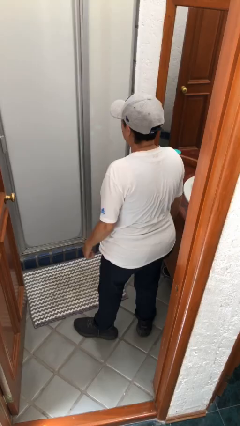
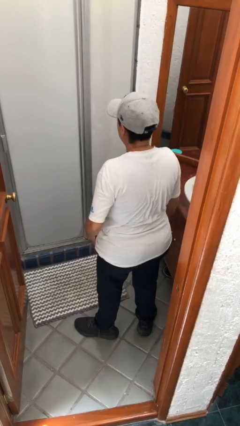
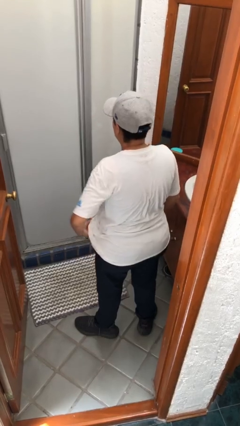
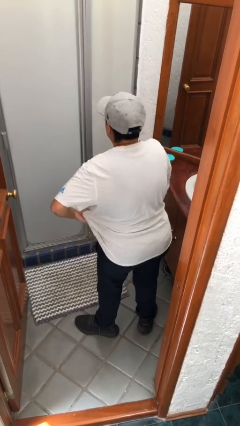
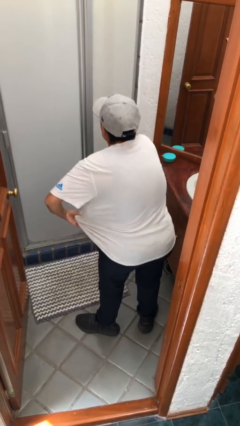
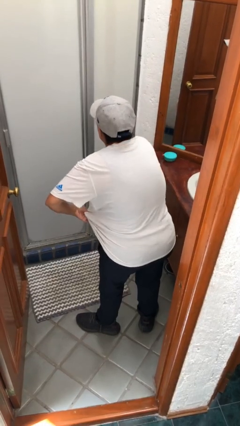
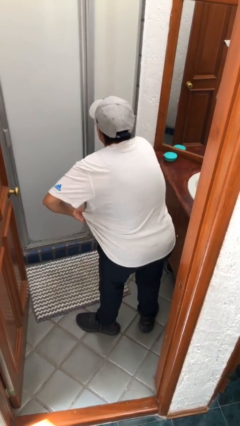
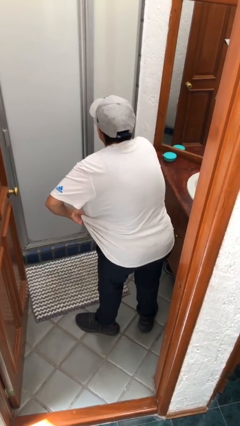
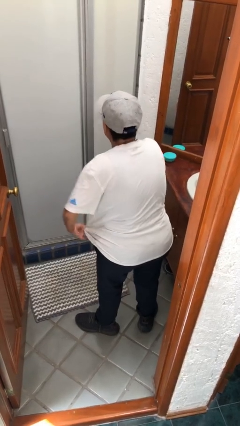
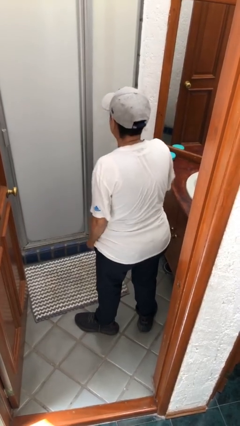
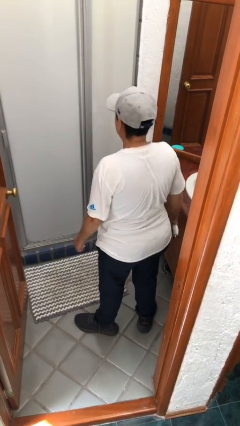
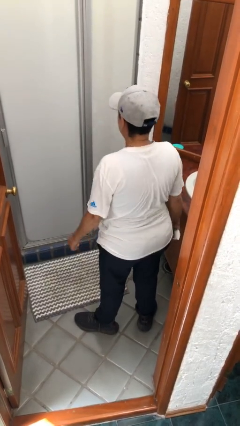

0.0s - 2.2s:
person applies deodorant

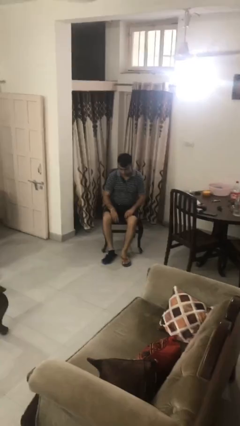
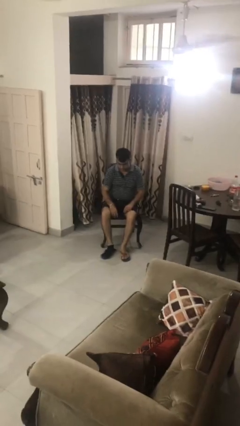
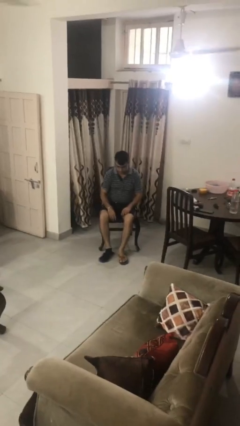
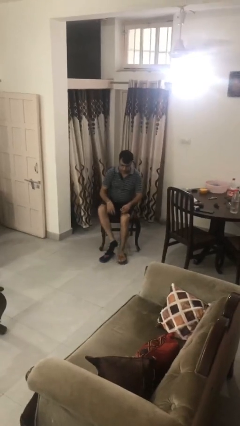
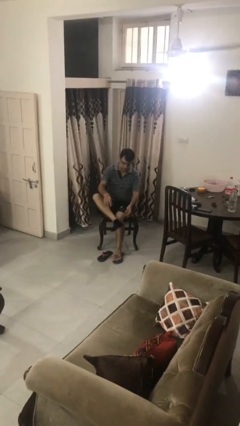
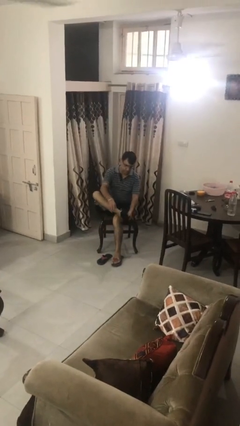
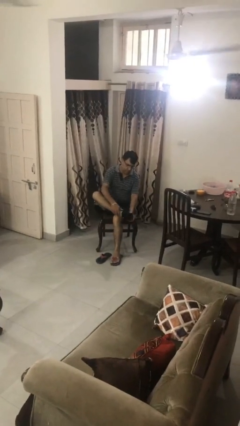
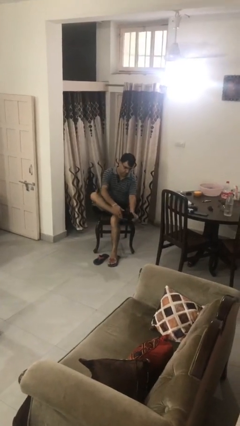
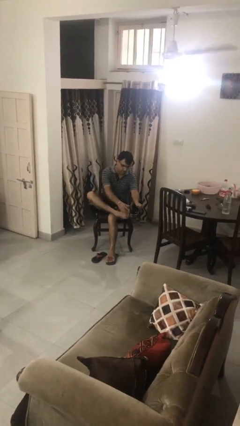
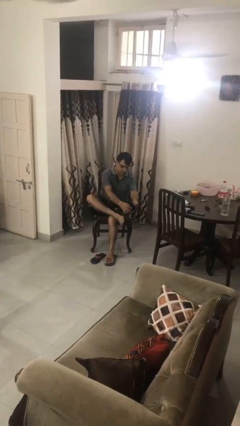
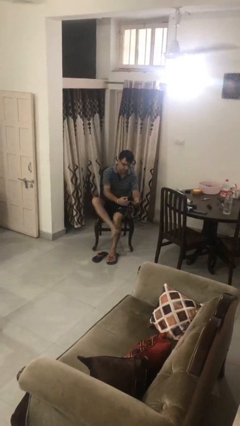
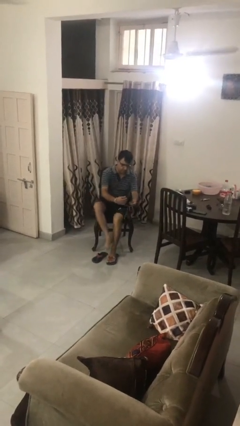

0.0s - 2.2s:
person takes off socks

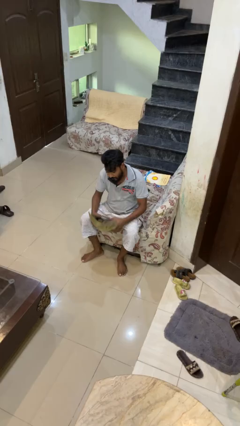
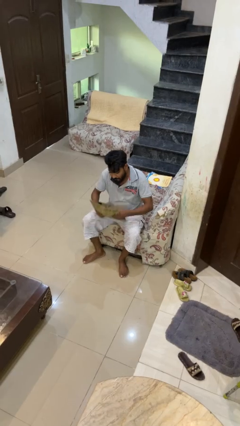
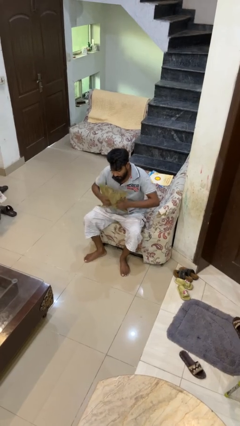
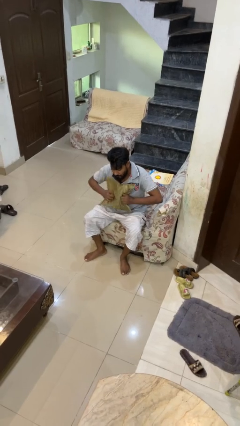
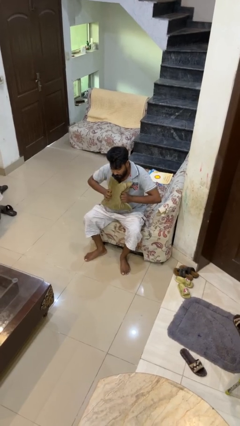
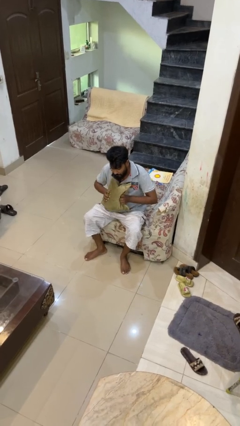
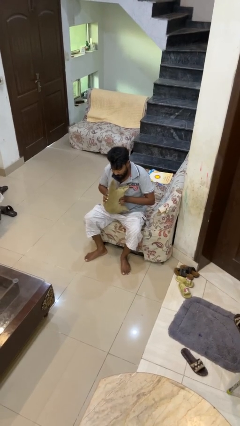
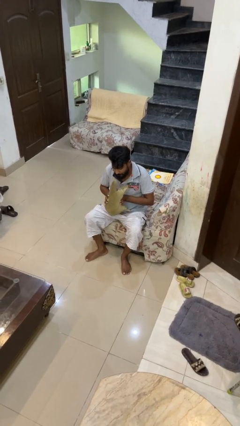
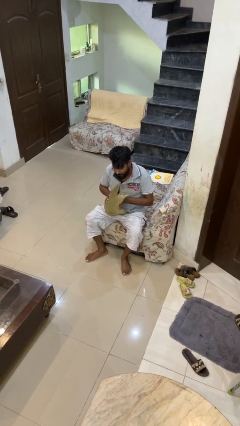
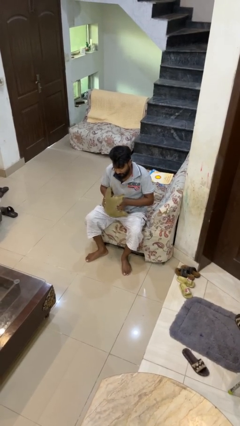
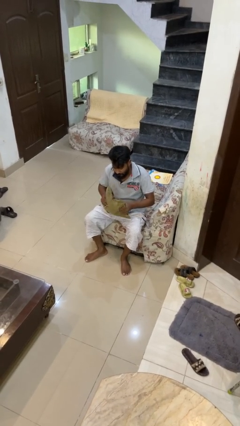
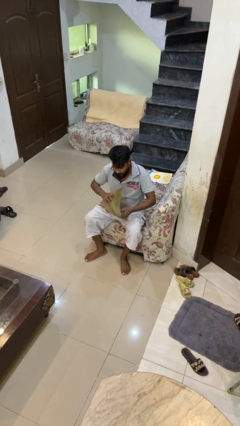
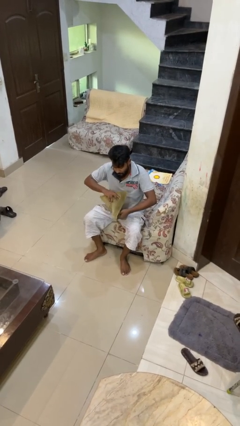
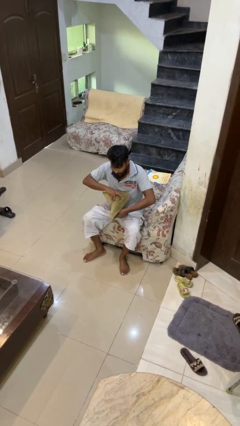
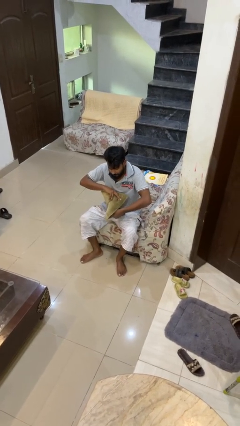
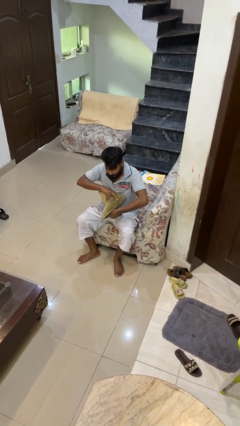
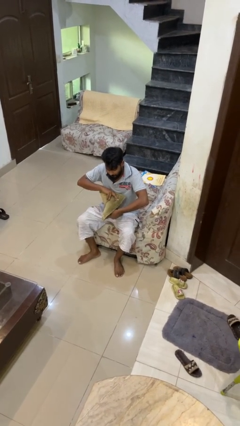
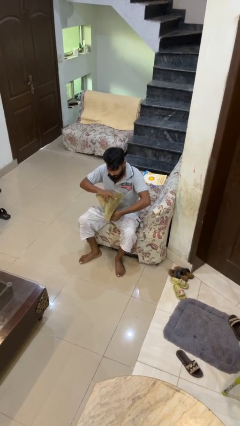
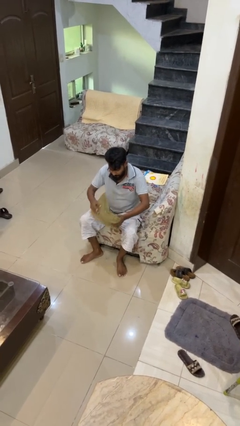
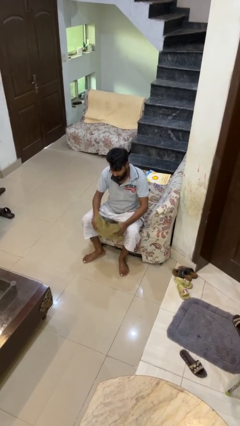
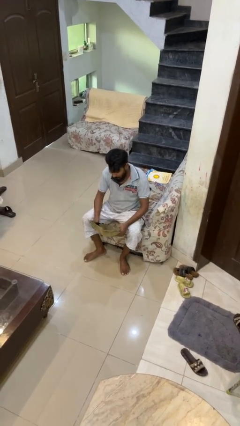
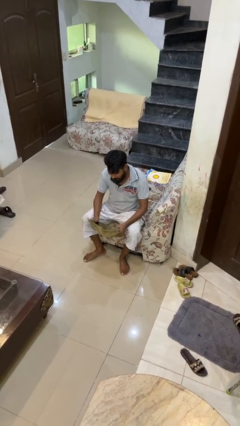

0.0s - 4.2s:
person squeezes object

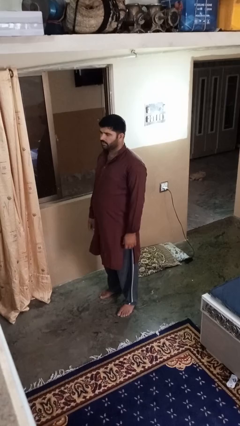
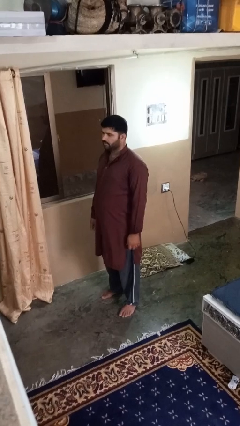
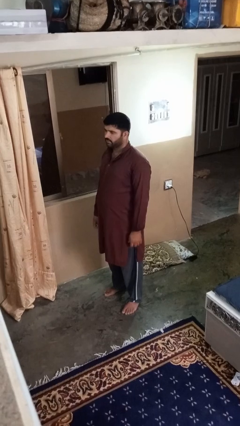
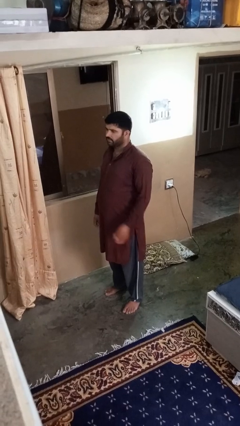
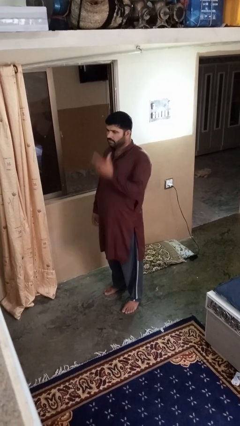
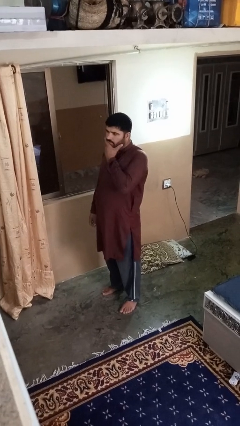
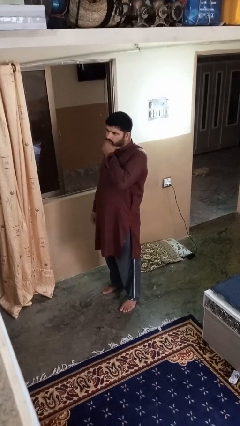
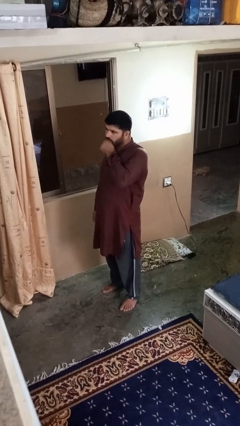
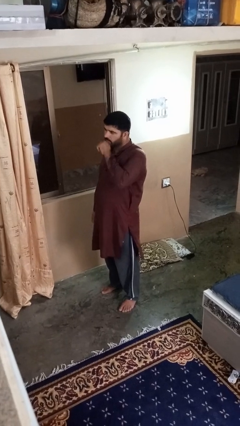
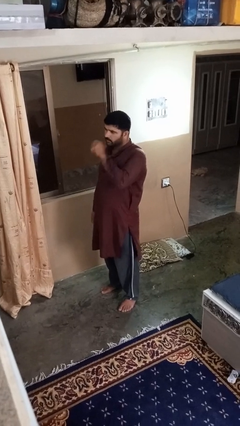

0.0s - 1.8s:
person strokes chin

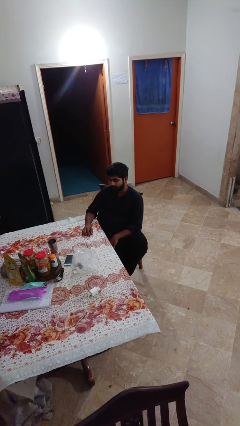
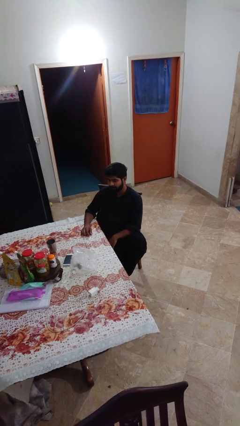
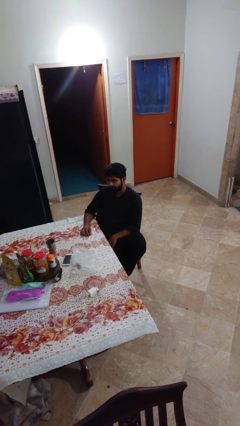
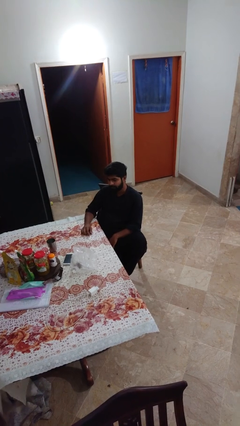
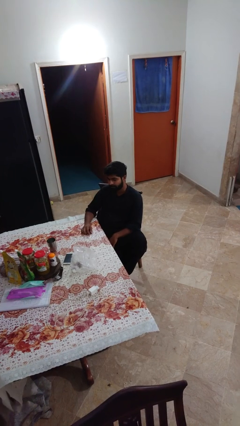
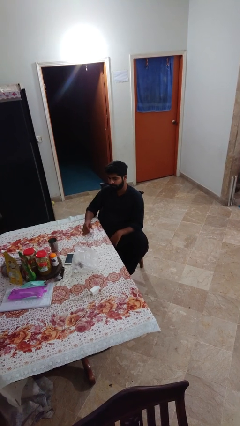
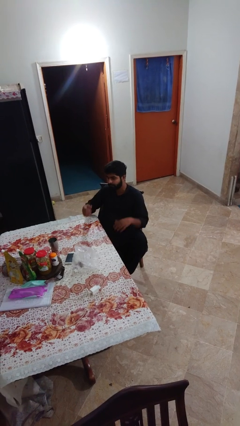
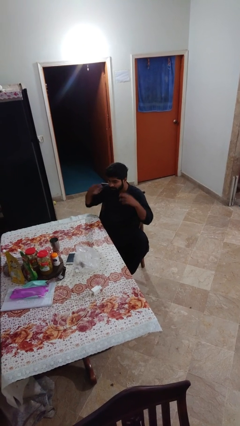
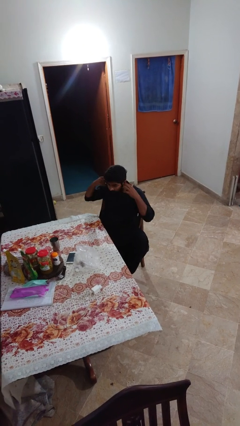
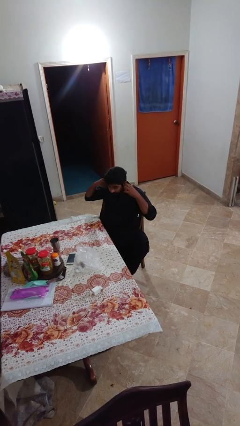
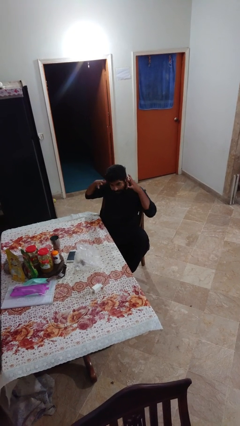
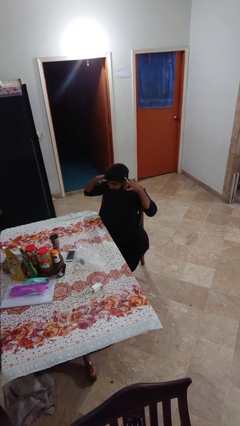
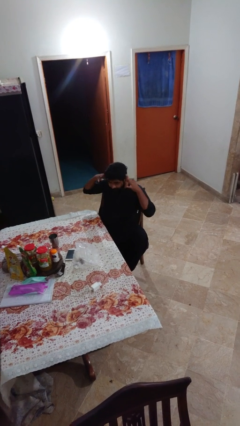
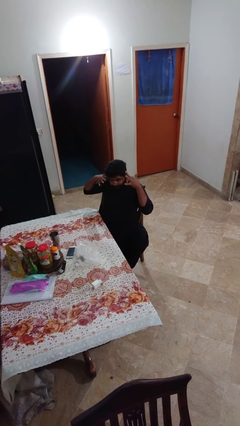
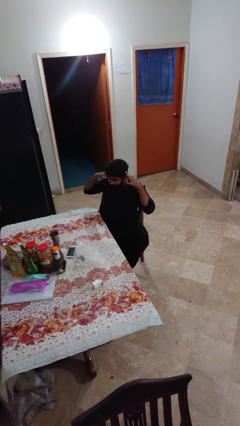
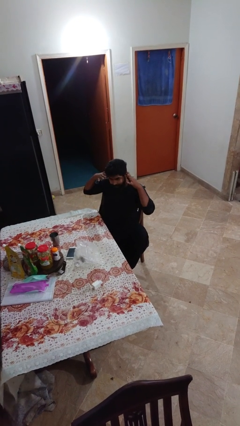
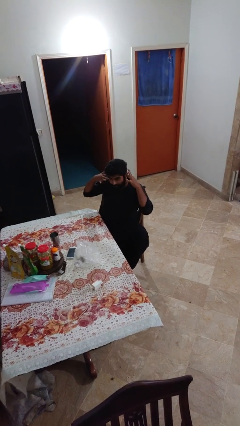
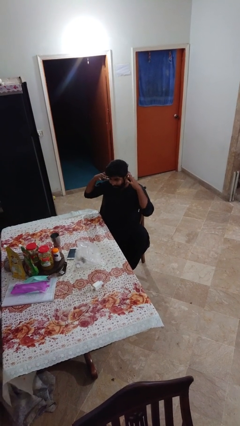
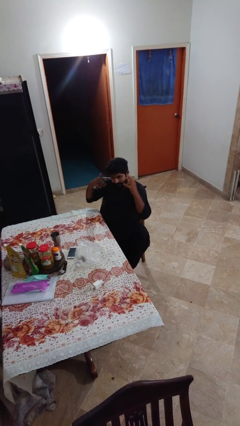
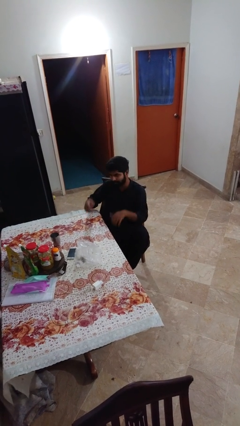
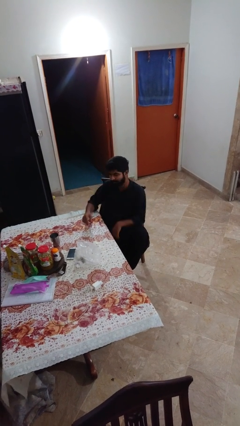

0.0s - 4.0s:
person puts fingers in ear

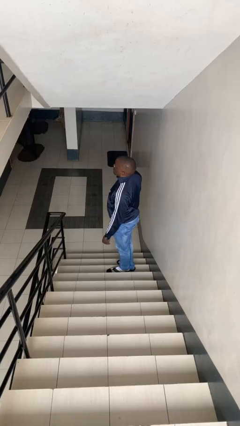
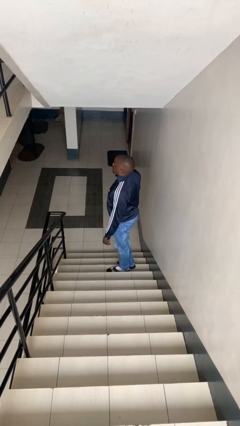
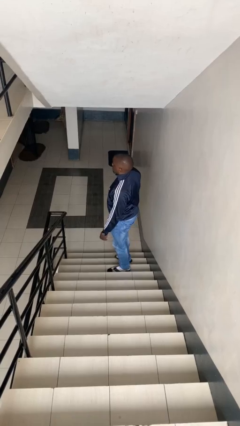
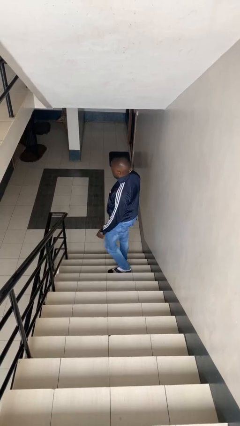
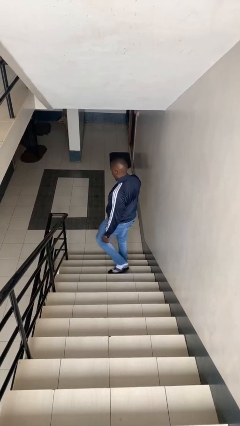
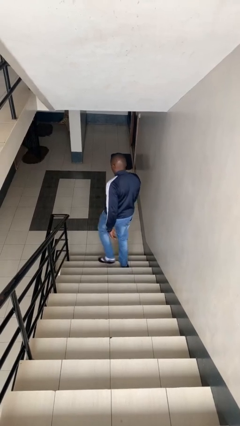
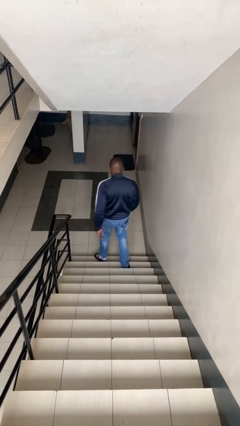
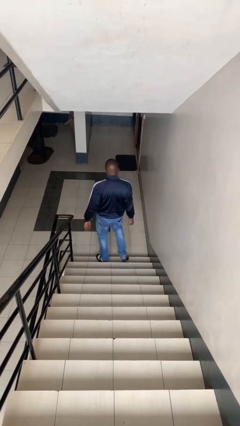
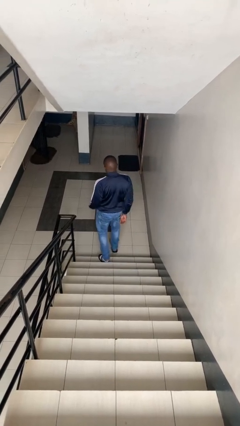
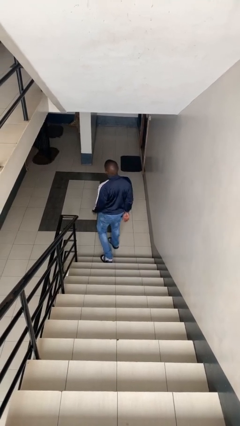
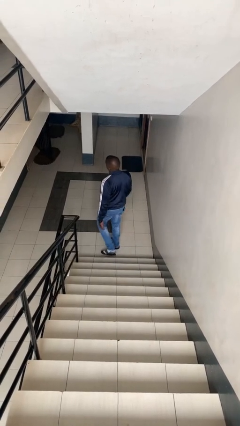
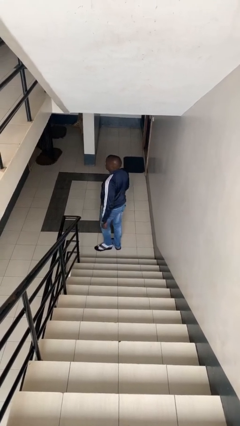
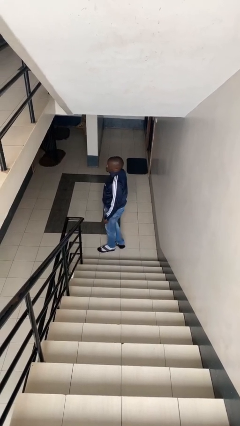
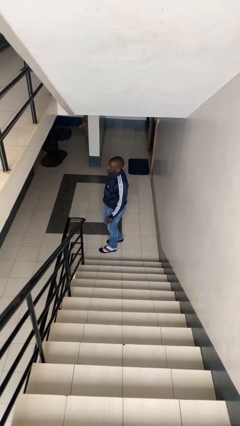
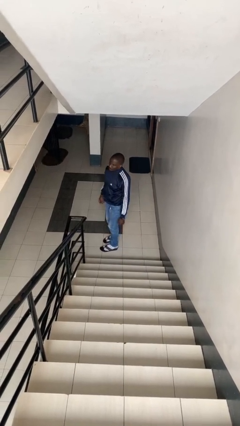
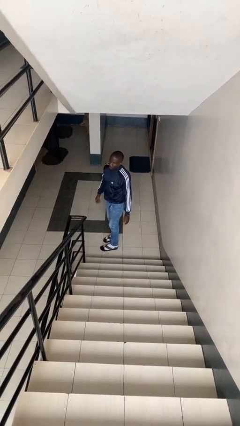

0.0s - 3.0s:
person climbs down stairs
